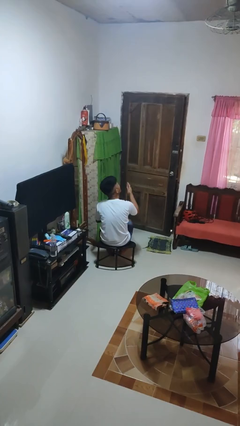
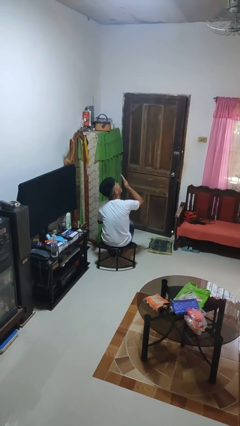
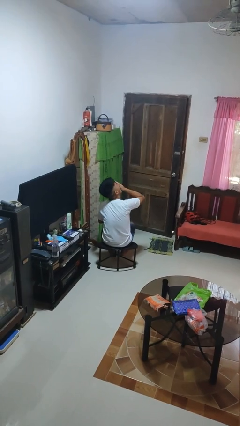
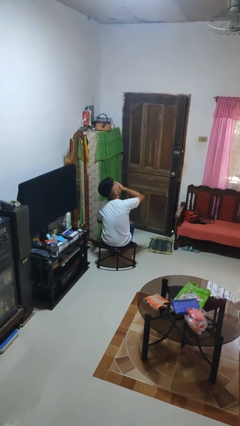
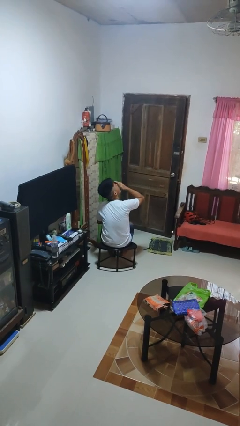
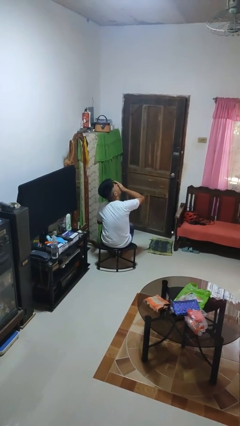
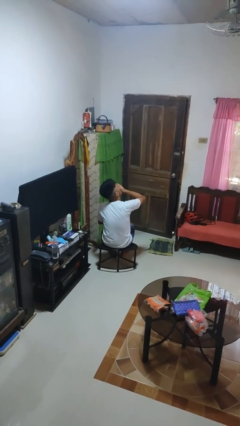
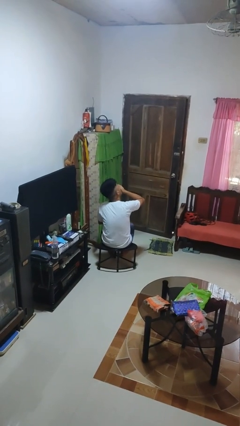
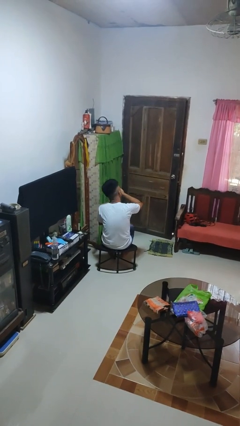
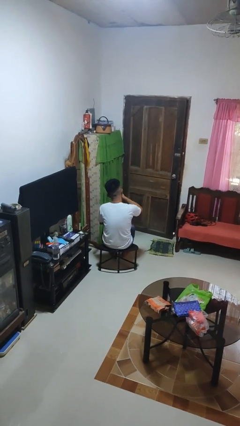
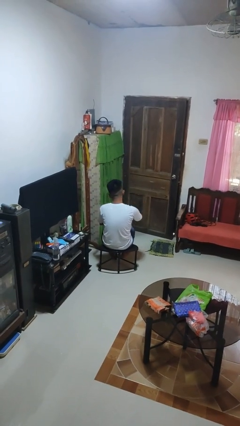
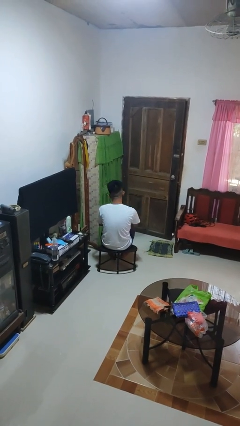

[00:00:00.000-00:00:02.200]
person yawns

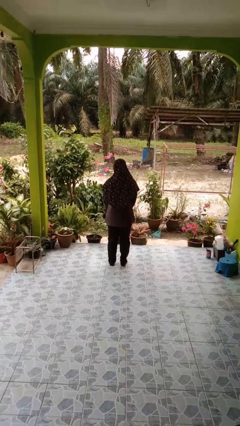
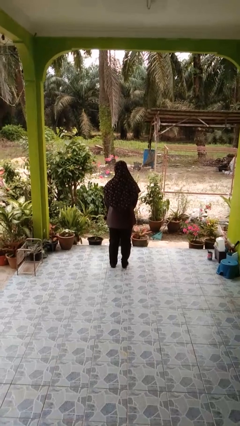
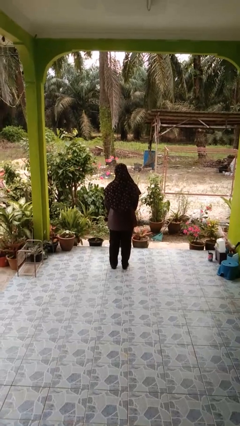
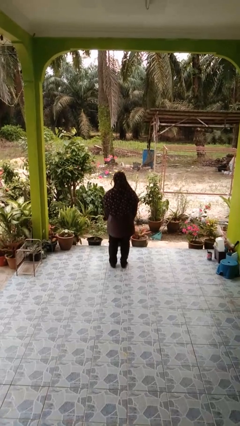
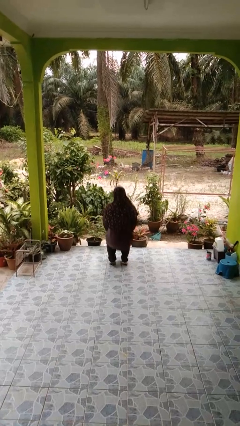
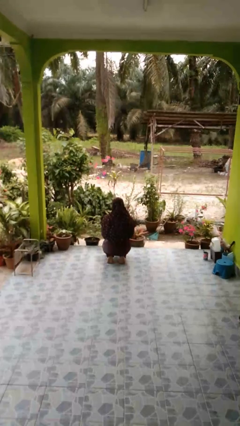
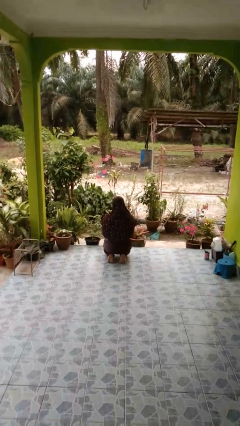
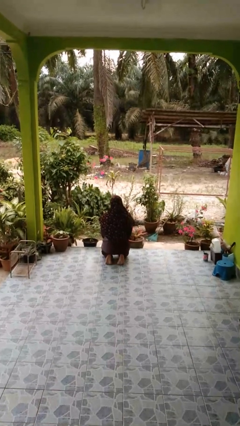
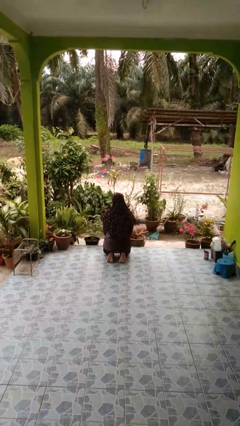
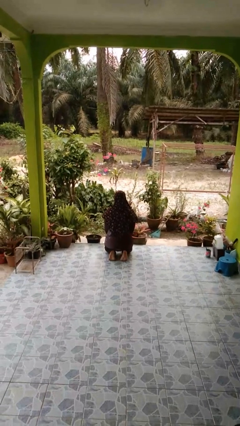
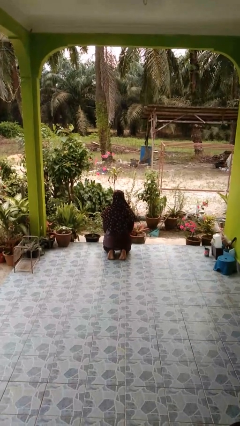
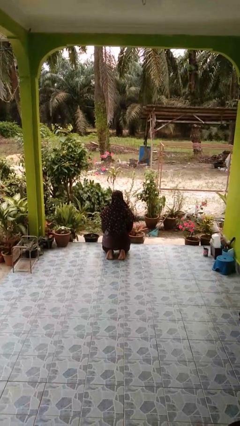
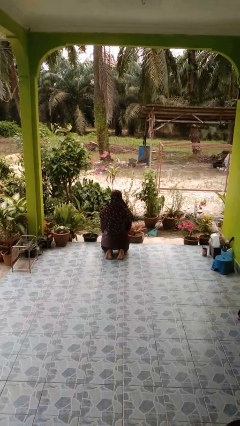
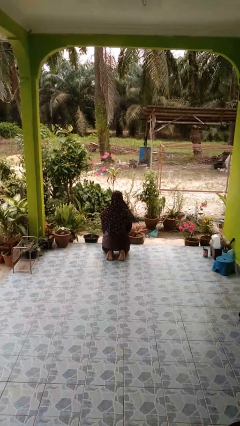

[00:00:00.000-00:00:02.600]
person kneels

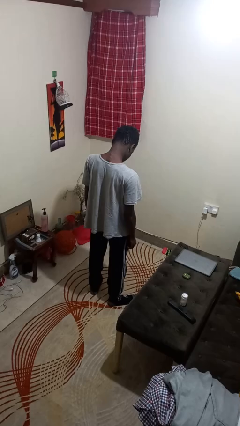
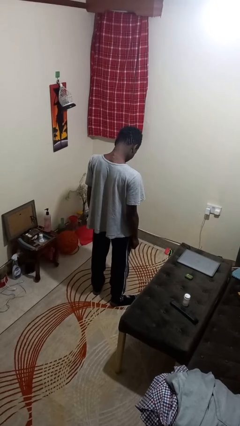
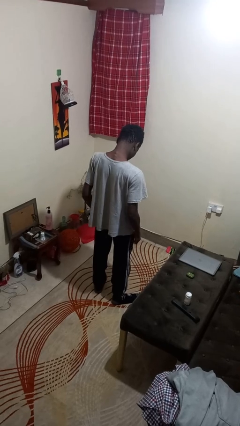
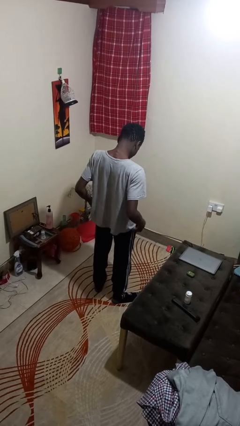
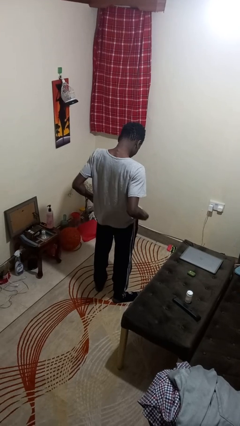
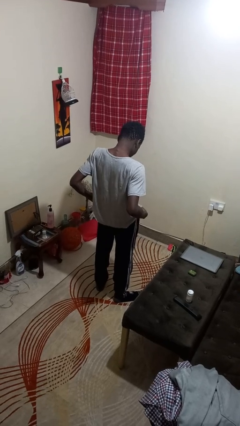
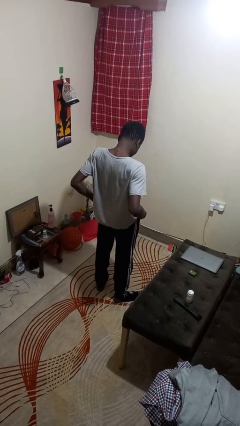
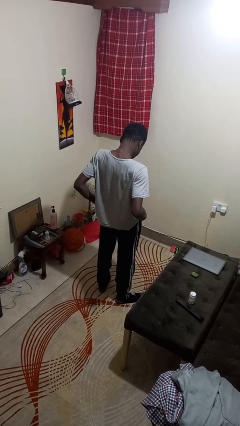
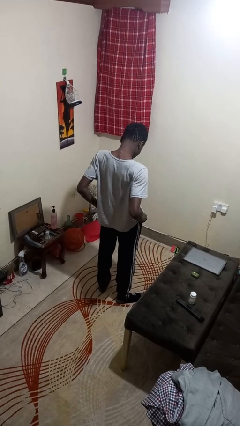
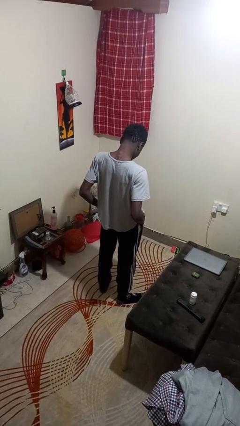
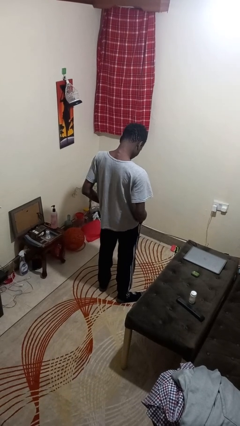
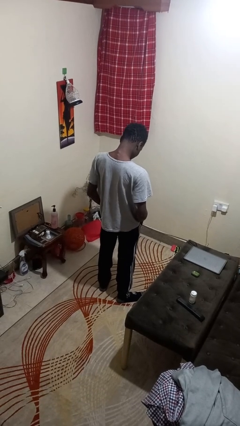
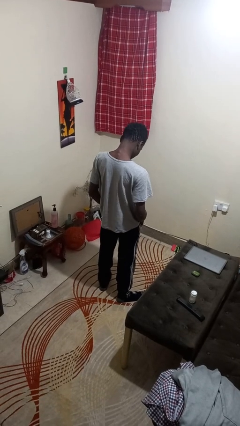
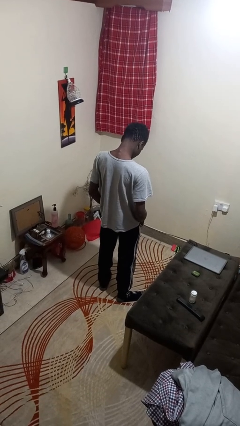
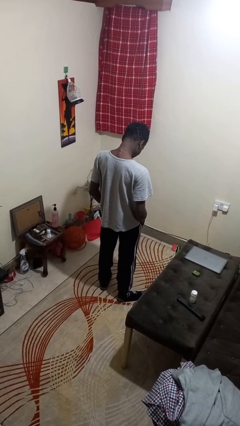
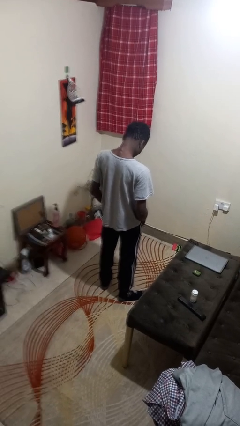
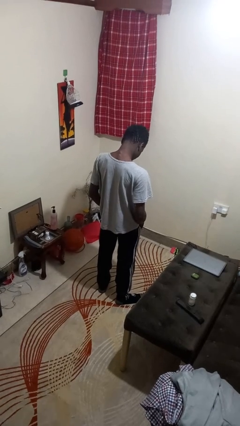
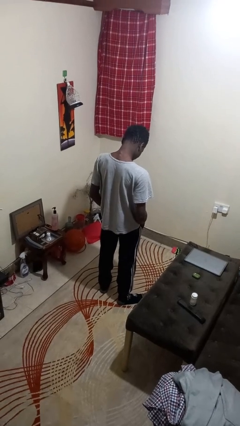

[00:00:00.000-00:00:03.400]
person puts hands in back pockets

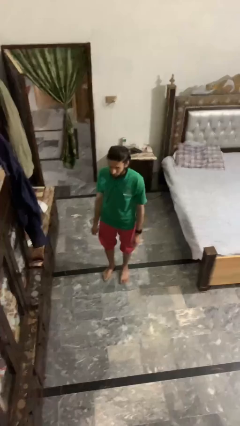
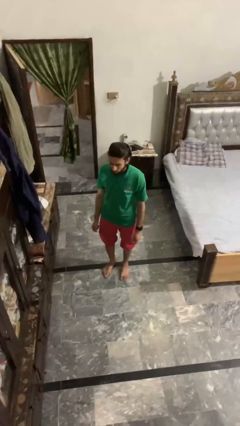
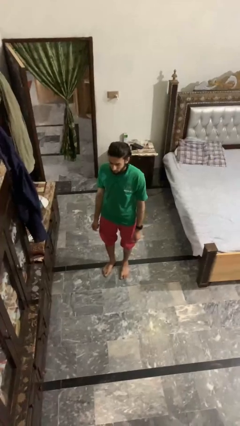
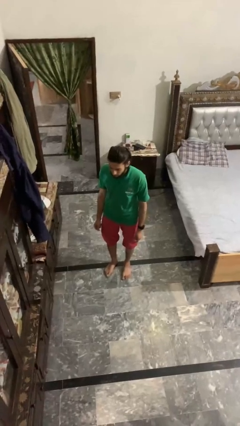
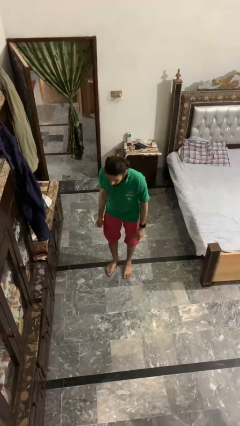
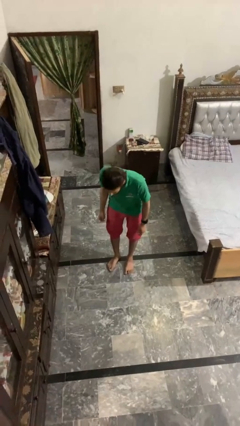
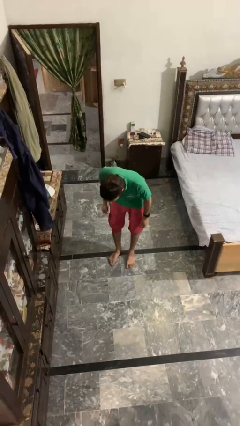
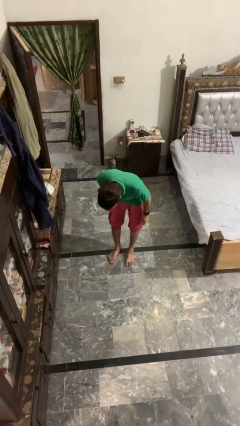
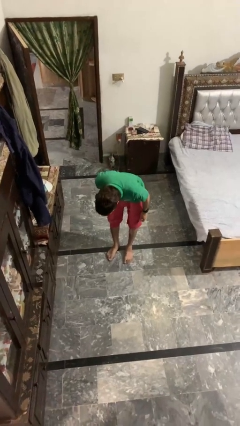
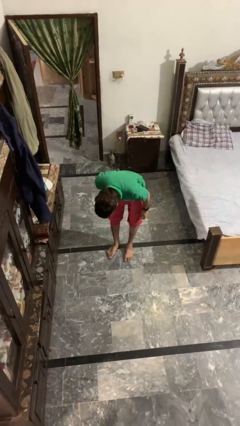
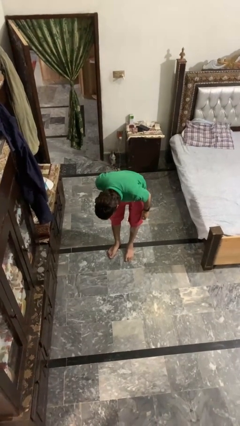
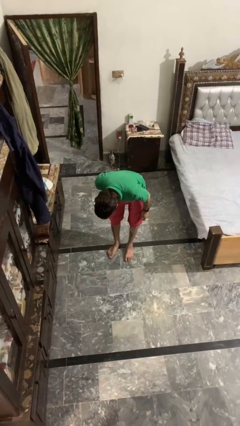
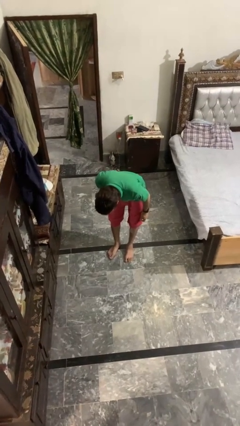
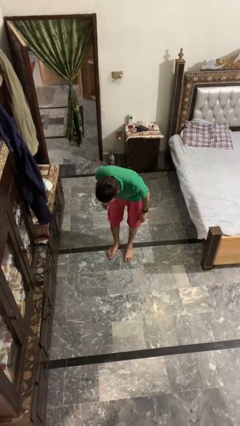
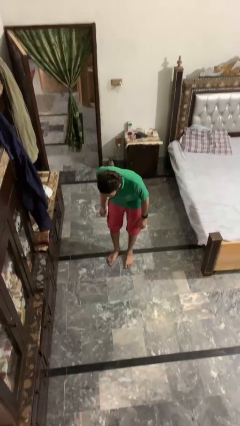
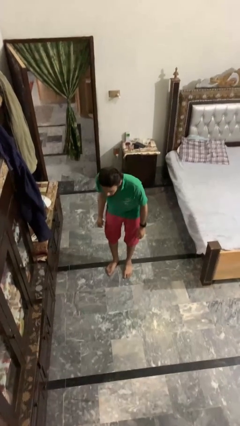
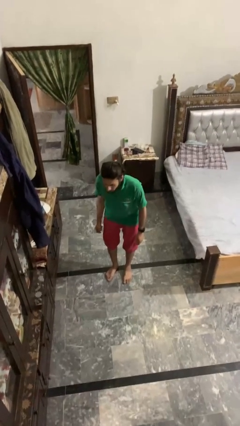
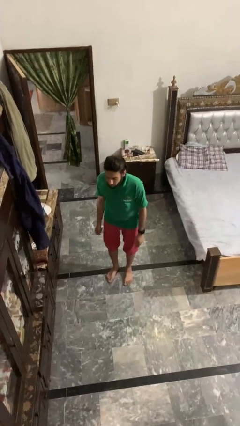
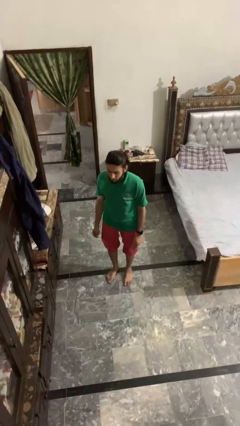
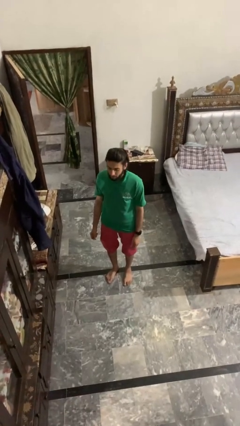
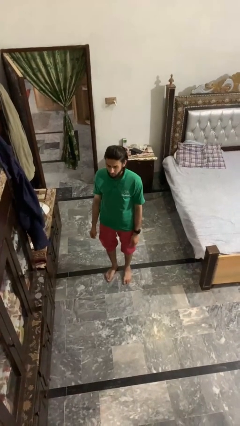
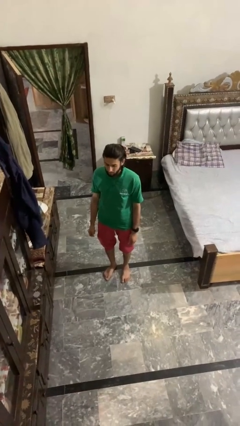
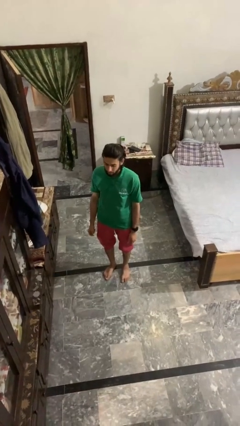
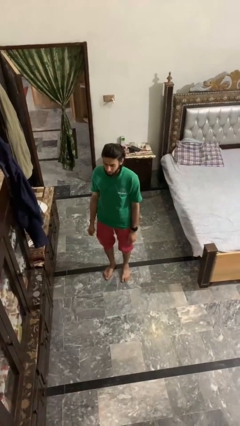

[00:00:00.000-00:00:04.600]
person bows

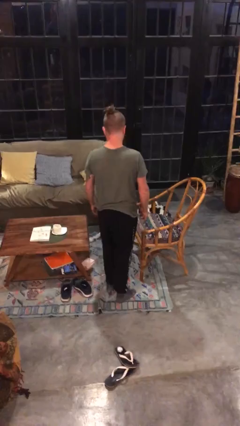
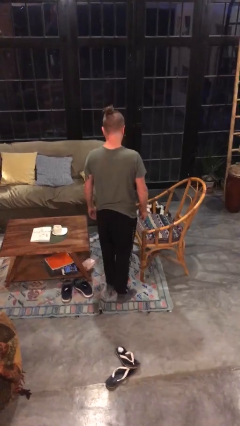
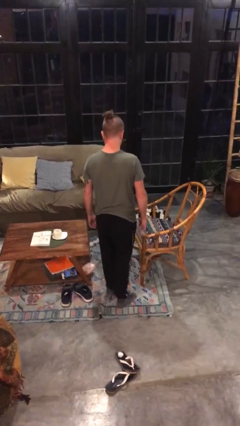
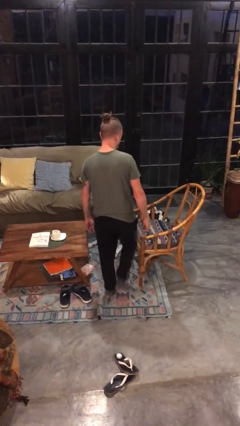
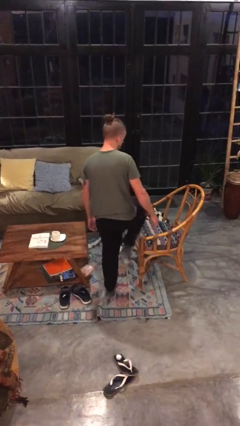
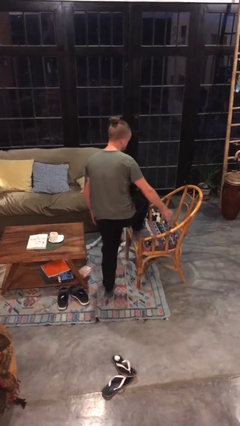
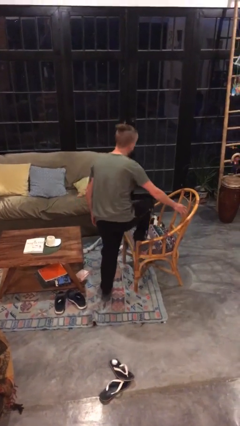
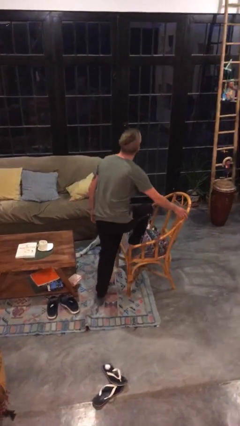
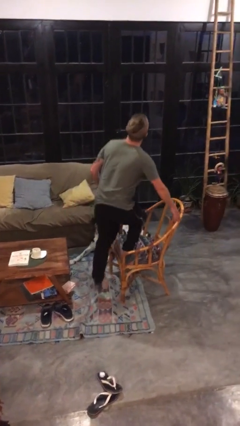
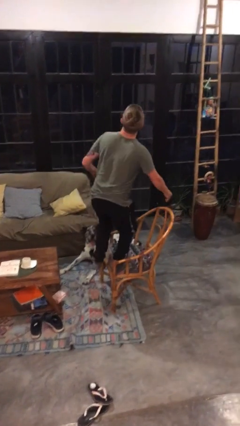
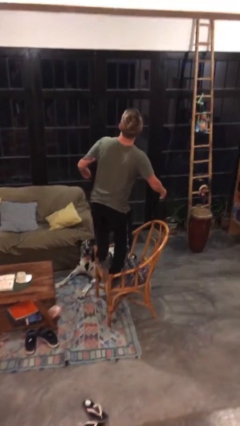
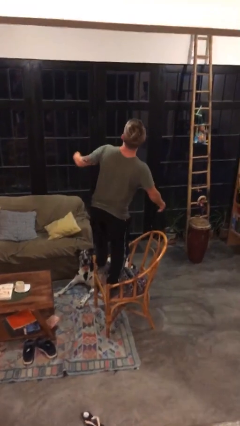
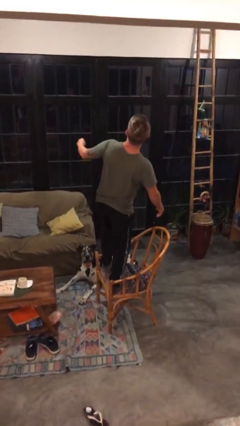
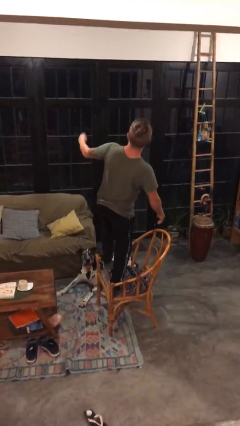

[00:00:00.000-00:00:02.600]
person climbs on chair

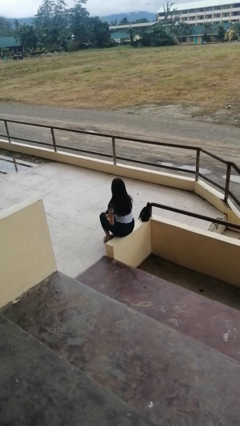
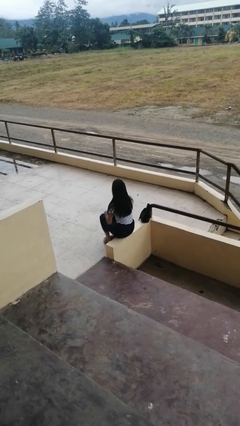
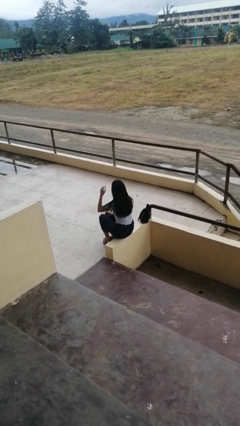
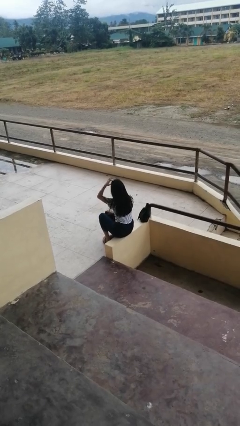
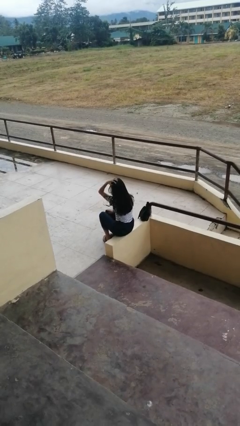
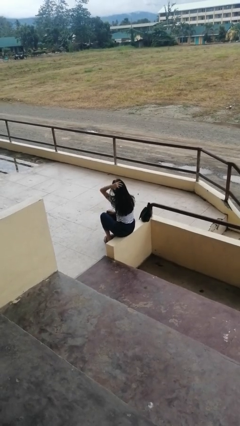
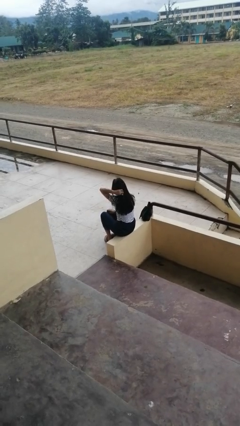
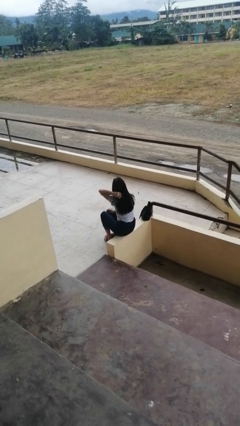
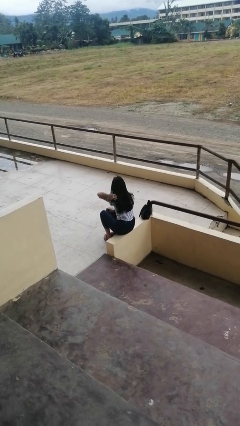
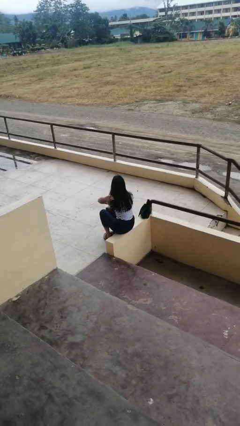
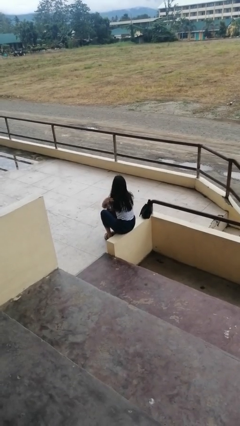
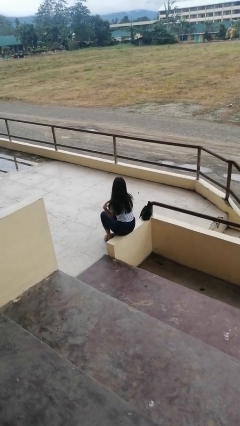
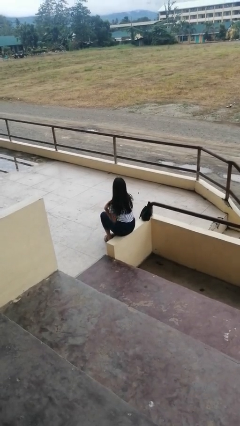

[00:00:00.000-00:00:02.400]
person strokes hair
